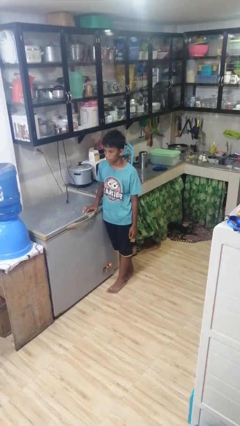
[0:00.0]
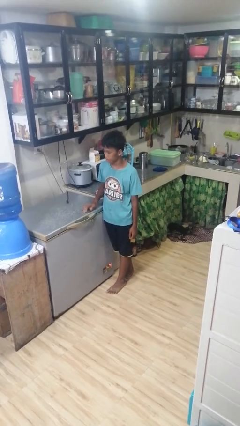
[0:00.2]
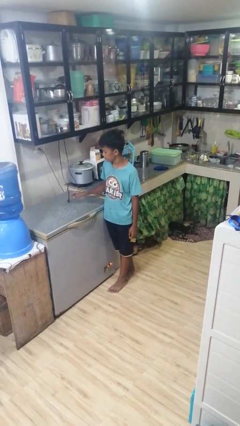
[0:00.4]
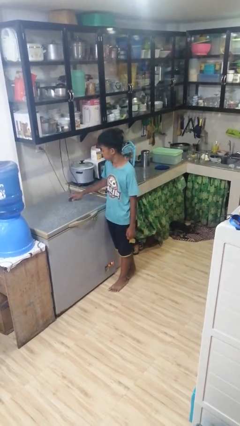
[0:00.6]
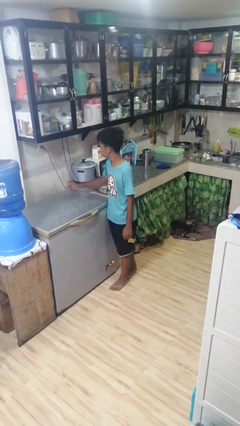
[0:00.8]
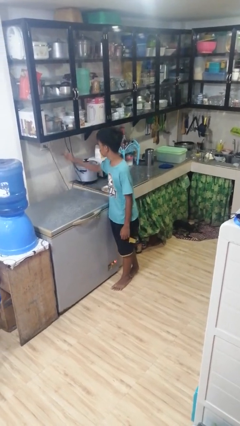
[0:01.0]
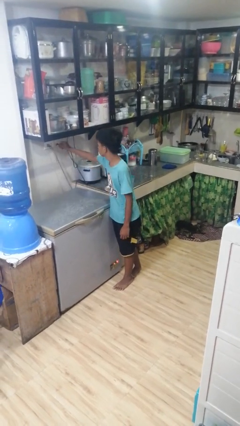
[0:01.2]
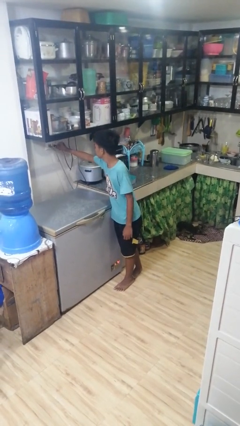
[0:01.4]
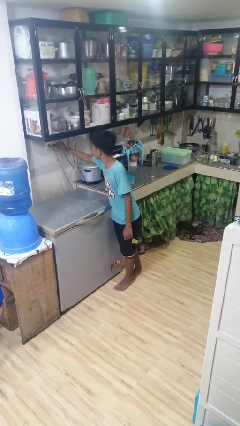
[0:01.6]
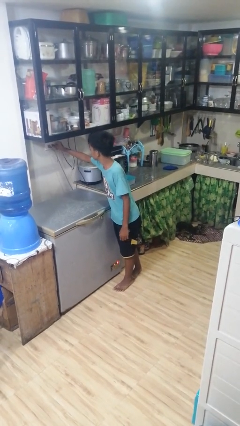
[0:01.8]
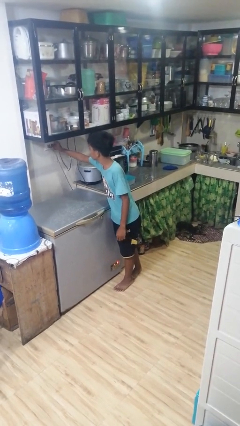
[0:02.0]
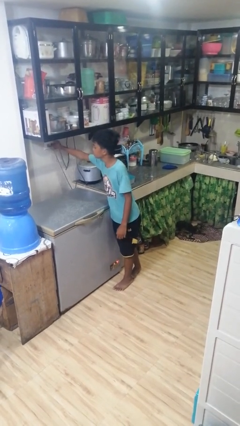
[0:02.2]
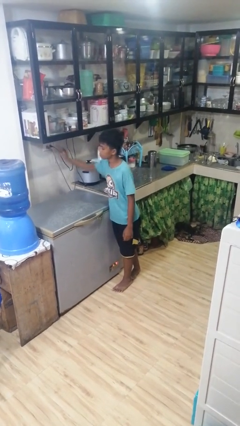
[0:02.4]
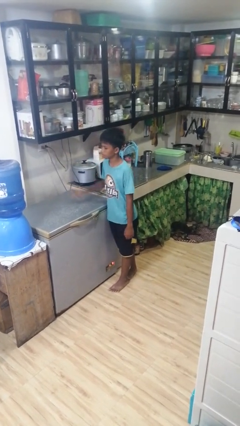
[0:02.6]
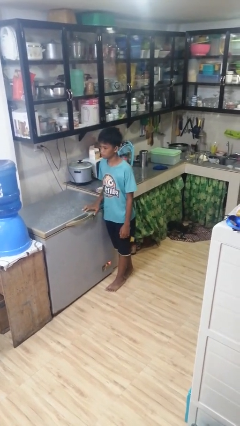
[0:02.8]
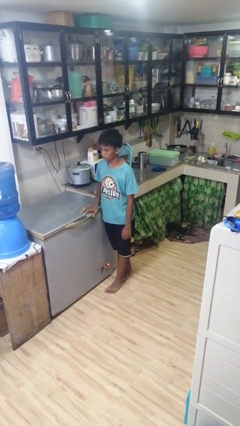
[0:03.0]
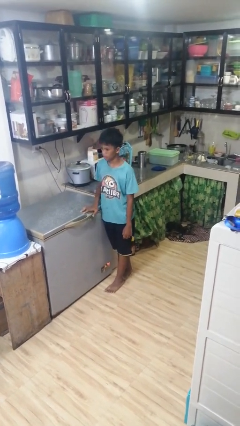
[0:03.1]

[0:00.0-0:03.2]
person plugs into electrical socket

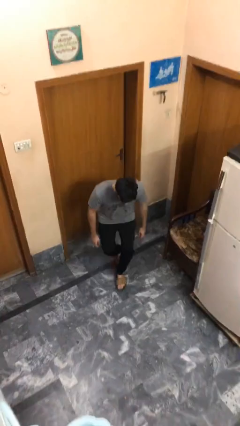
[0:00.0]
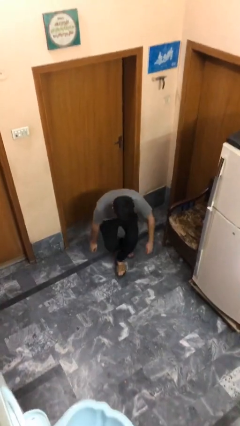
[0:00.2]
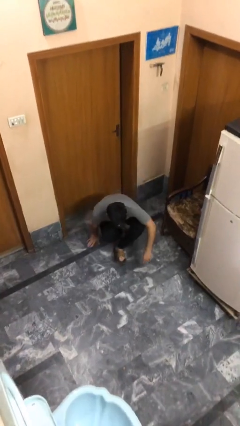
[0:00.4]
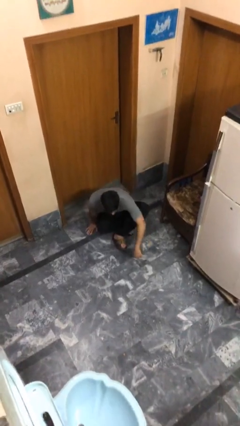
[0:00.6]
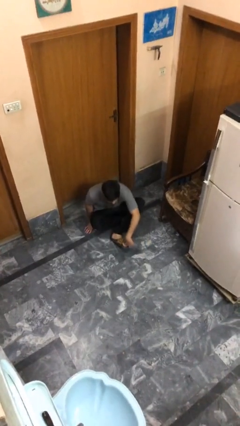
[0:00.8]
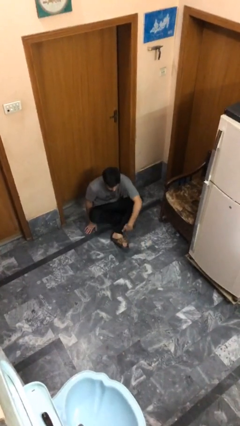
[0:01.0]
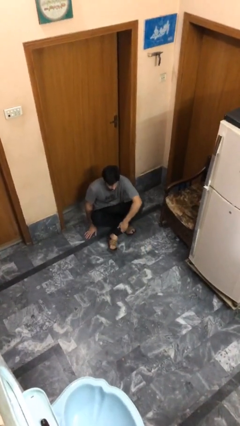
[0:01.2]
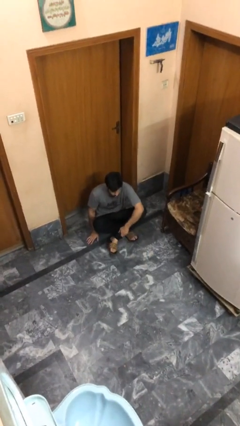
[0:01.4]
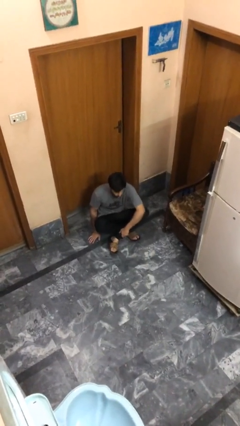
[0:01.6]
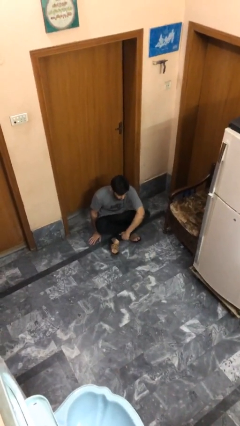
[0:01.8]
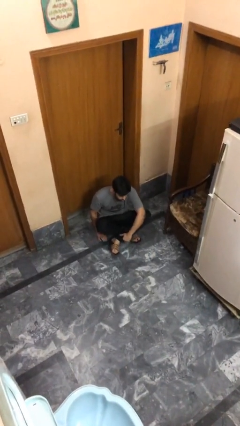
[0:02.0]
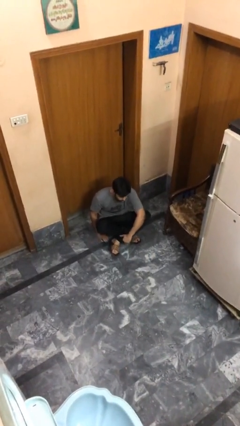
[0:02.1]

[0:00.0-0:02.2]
person sits crisscross

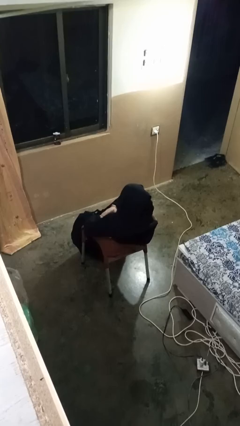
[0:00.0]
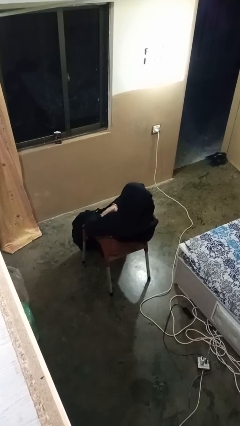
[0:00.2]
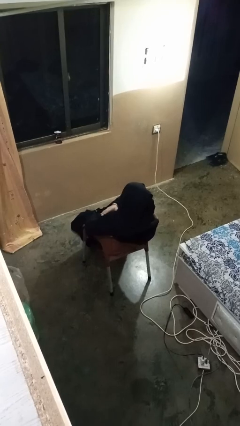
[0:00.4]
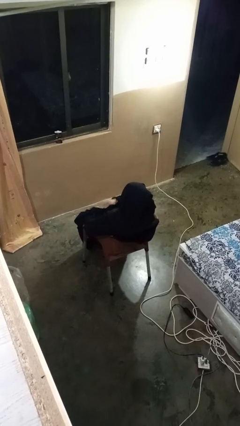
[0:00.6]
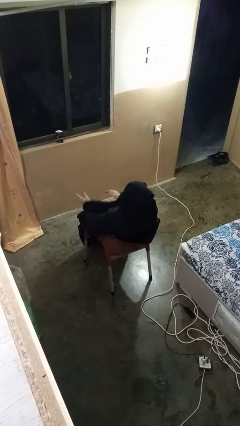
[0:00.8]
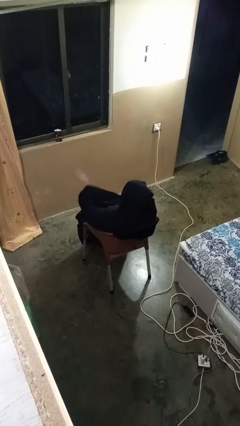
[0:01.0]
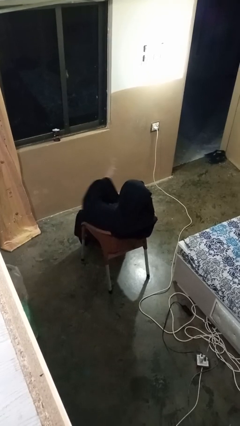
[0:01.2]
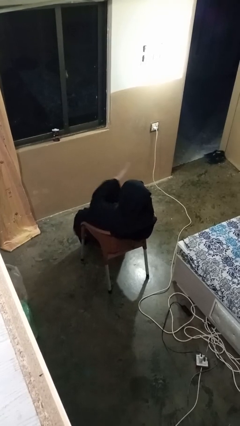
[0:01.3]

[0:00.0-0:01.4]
person gestures swipe right

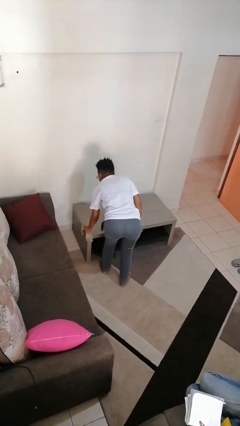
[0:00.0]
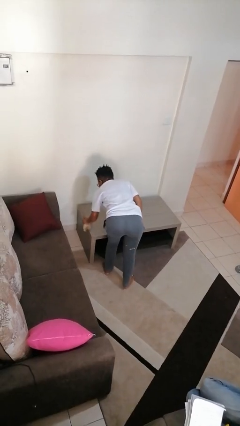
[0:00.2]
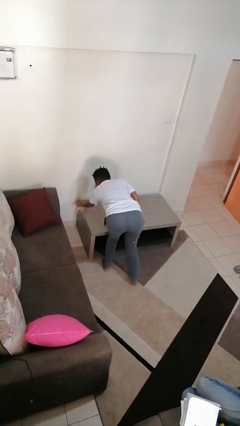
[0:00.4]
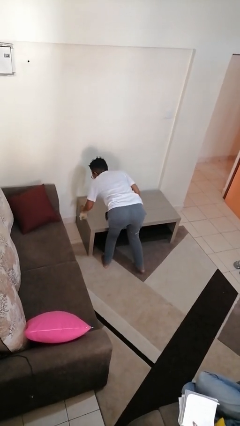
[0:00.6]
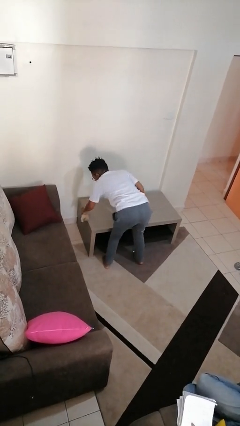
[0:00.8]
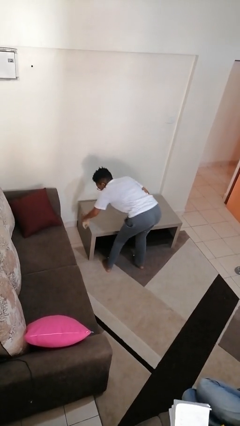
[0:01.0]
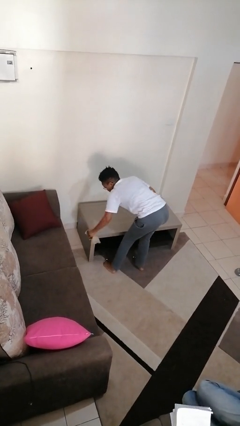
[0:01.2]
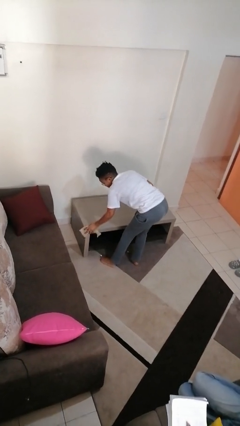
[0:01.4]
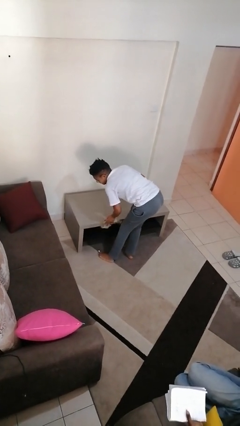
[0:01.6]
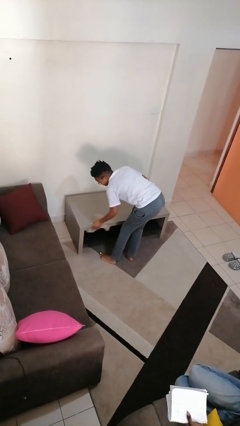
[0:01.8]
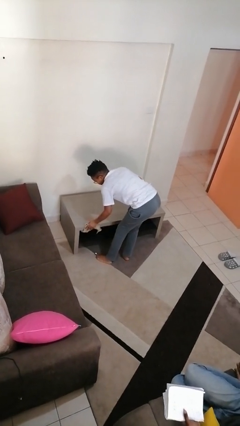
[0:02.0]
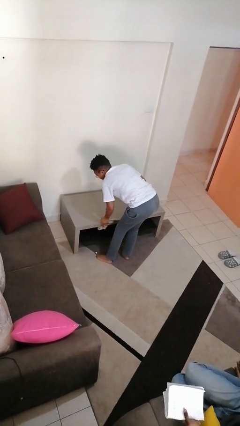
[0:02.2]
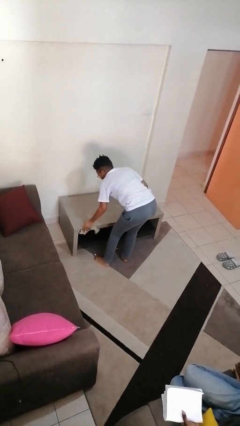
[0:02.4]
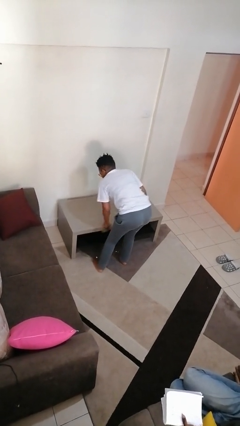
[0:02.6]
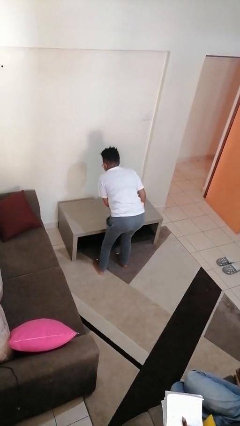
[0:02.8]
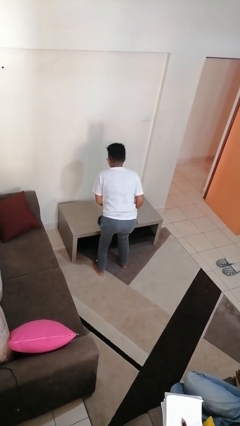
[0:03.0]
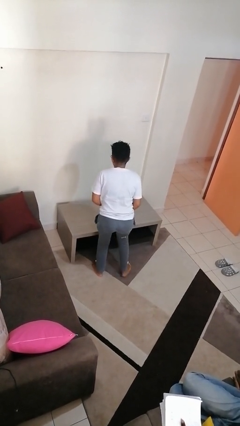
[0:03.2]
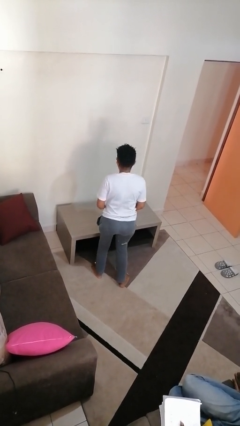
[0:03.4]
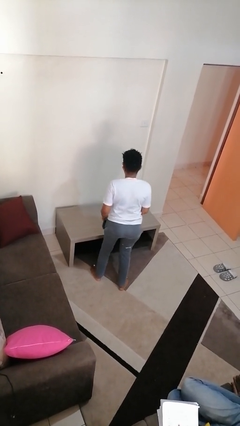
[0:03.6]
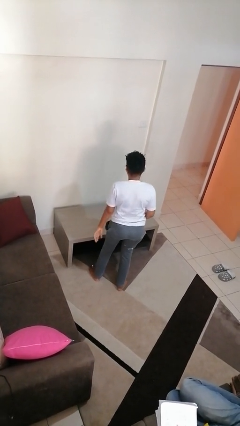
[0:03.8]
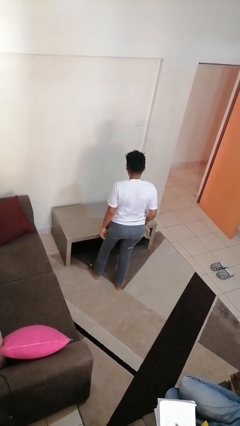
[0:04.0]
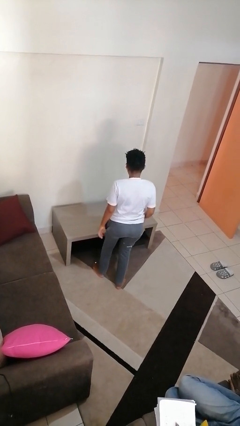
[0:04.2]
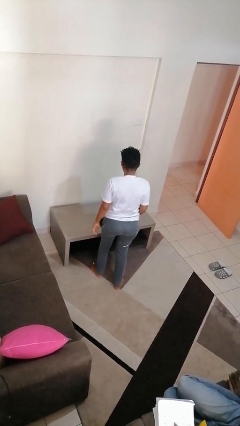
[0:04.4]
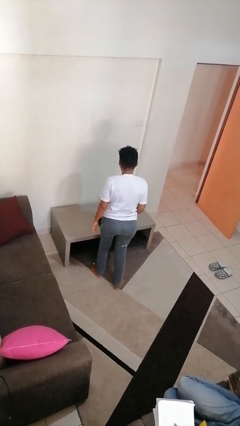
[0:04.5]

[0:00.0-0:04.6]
person cleans table with rag

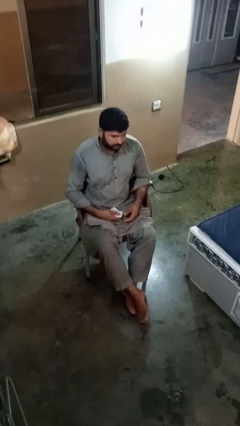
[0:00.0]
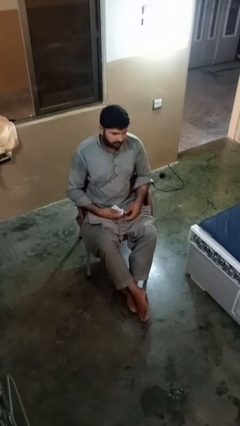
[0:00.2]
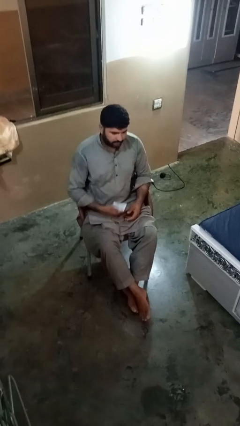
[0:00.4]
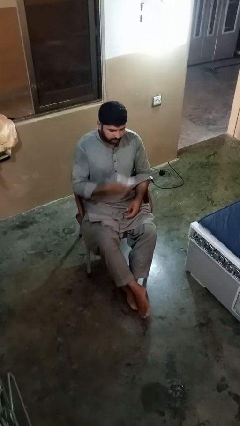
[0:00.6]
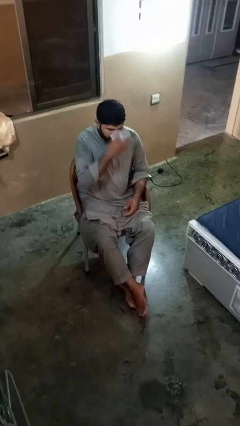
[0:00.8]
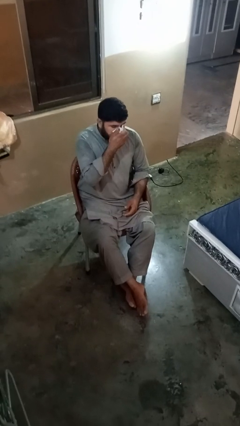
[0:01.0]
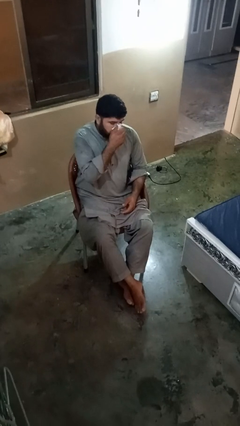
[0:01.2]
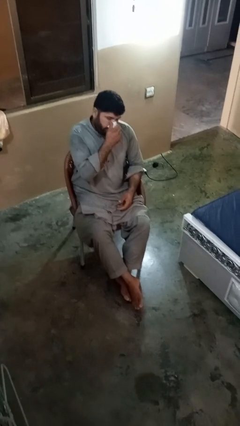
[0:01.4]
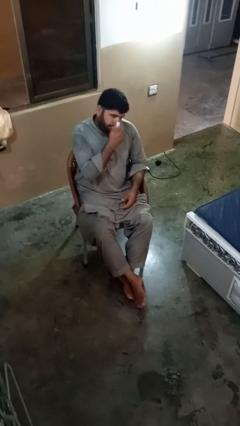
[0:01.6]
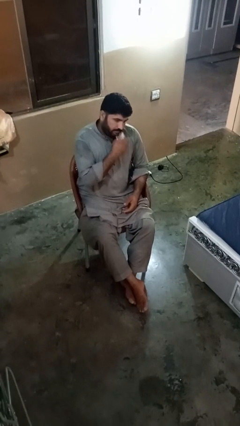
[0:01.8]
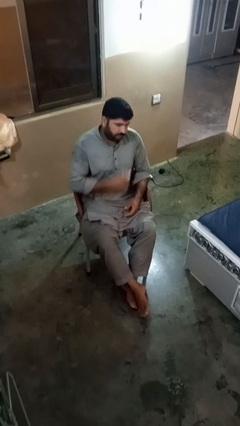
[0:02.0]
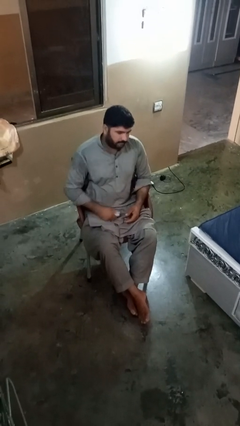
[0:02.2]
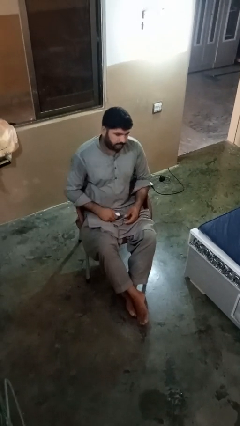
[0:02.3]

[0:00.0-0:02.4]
person blows nose

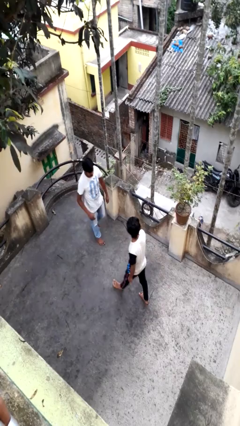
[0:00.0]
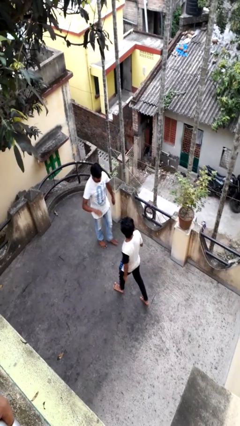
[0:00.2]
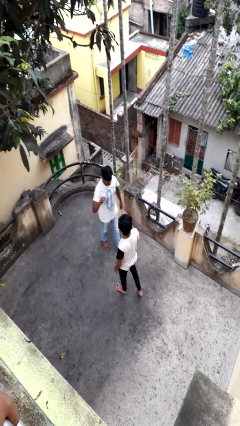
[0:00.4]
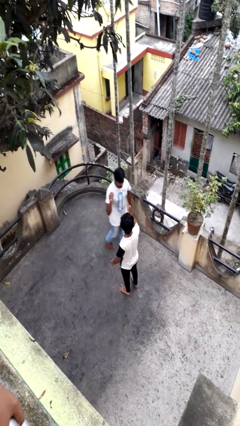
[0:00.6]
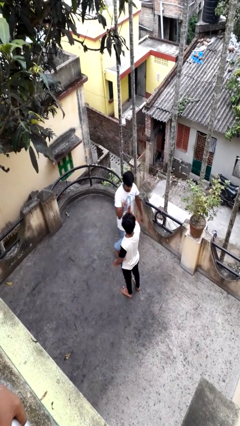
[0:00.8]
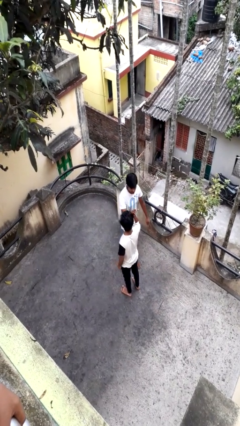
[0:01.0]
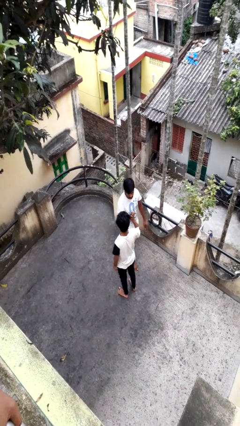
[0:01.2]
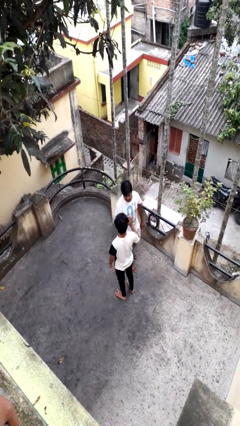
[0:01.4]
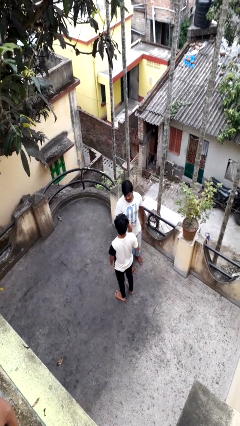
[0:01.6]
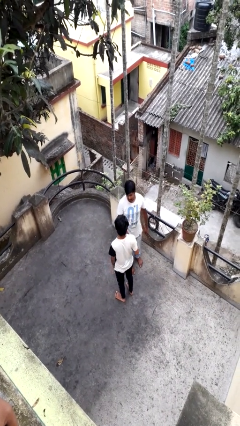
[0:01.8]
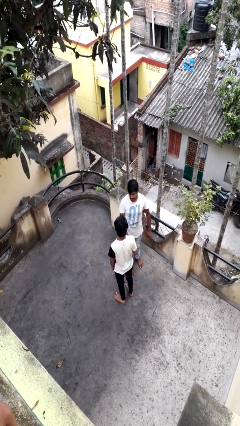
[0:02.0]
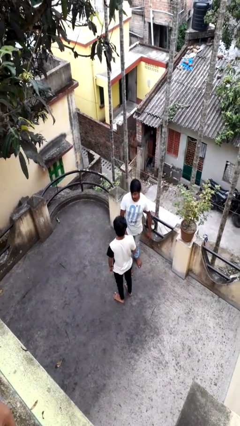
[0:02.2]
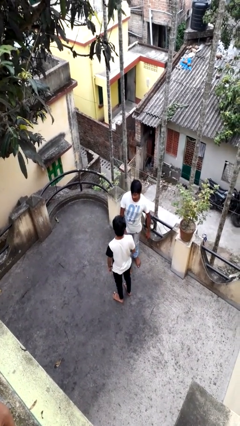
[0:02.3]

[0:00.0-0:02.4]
person highfives hand

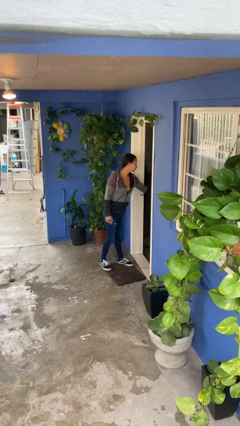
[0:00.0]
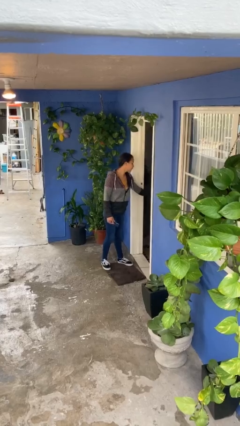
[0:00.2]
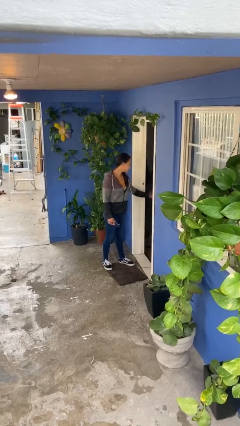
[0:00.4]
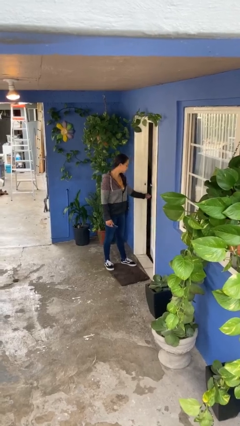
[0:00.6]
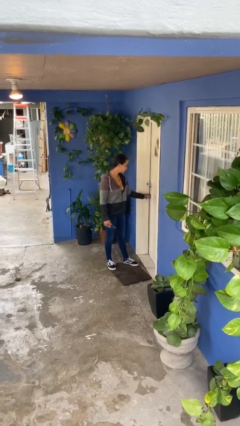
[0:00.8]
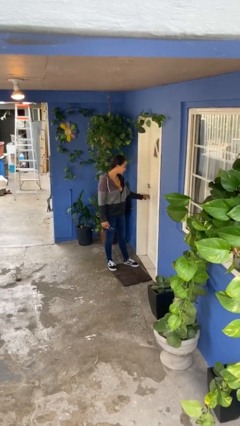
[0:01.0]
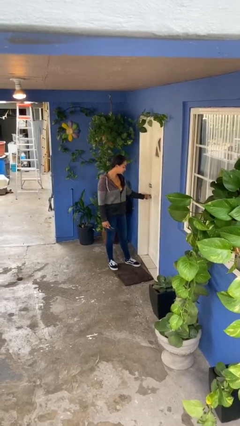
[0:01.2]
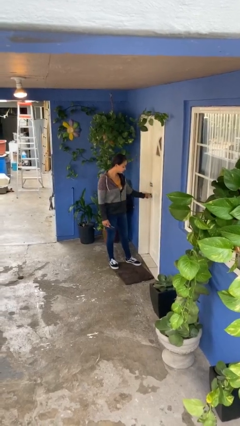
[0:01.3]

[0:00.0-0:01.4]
person closes facility door
